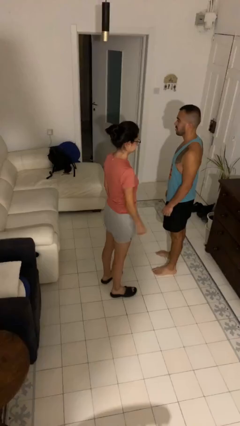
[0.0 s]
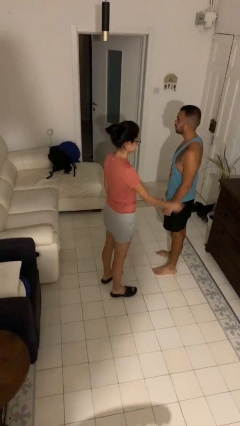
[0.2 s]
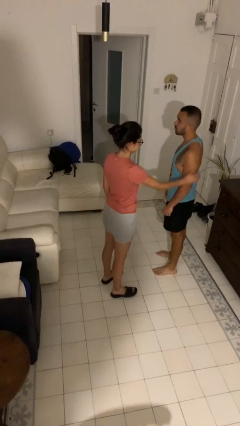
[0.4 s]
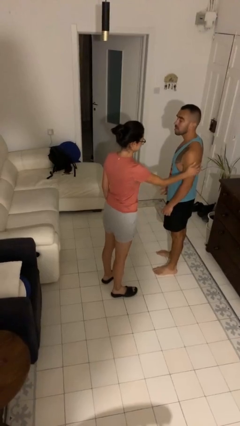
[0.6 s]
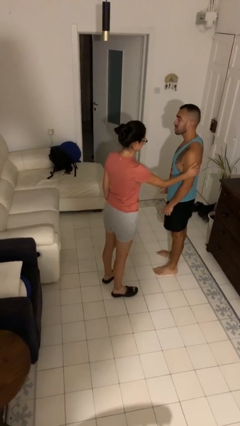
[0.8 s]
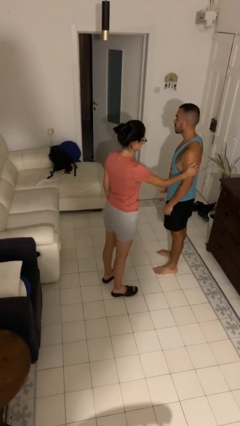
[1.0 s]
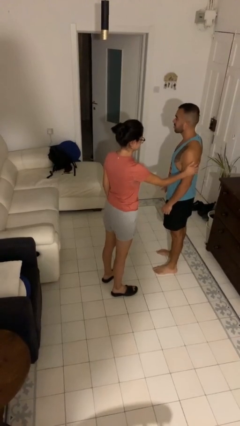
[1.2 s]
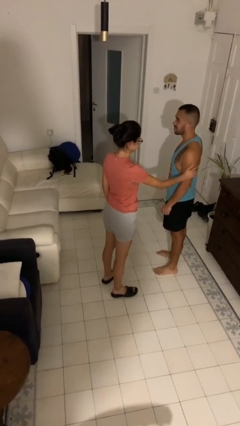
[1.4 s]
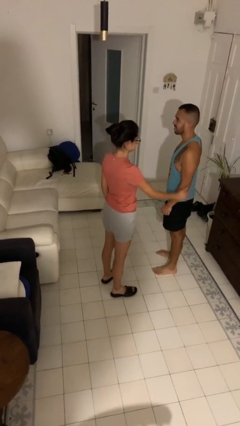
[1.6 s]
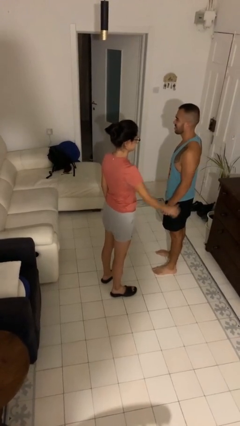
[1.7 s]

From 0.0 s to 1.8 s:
person grabs person by bicep

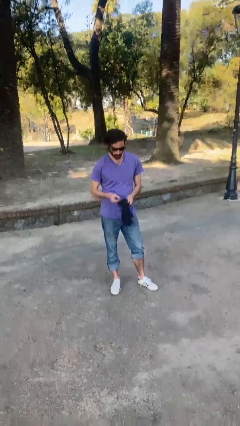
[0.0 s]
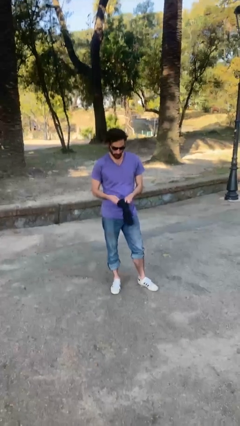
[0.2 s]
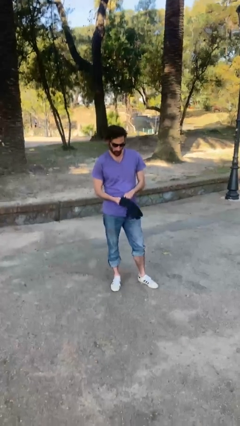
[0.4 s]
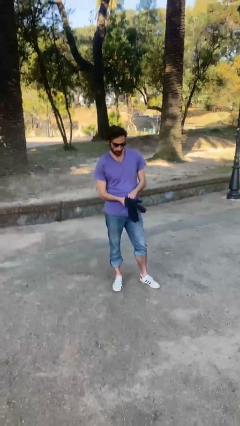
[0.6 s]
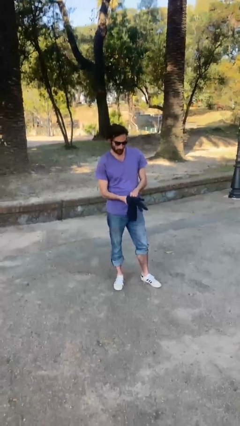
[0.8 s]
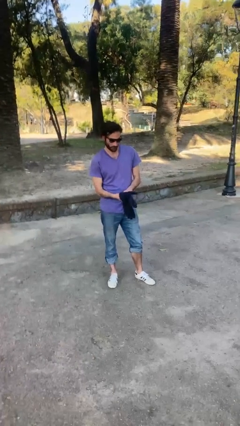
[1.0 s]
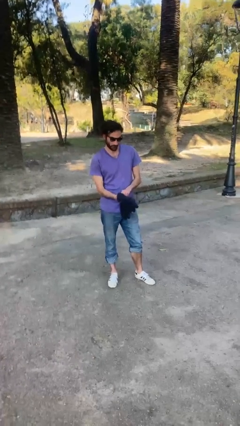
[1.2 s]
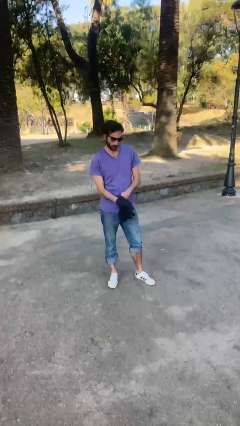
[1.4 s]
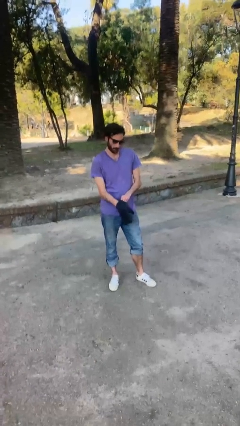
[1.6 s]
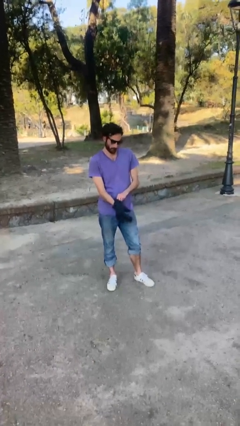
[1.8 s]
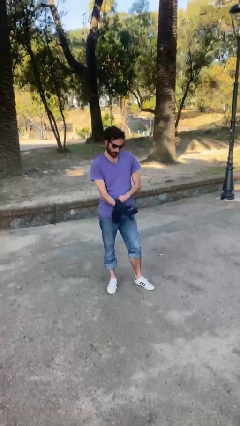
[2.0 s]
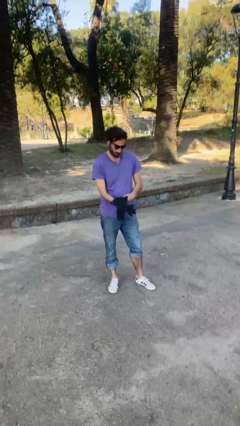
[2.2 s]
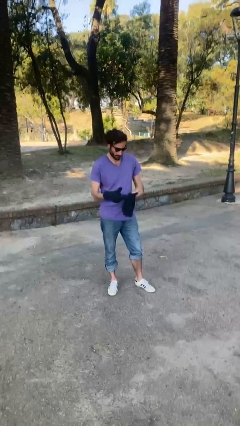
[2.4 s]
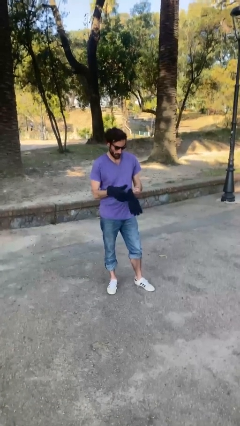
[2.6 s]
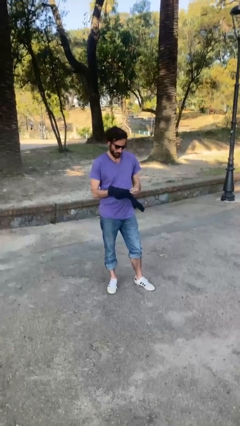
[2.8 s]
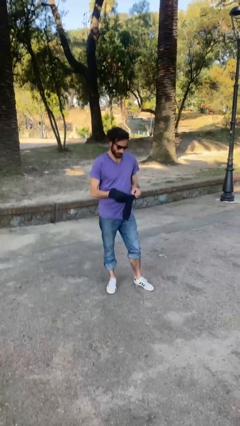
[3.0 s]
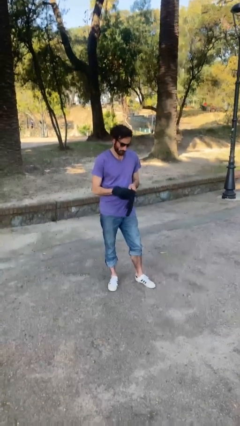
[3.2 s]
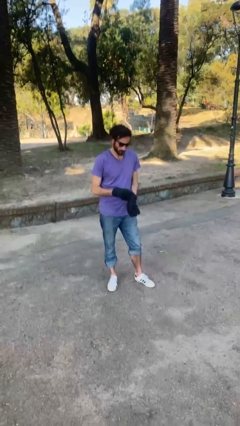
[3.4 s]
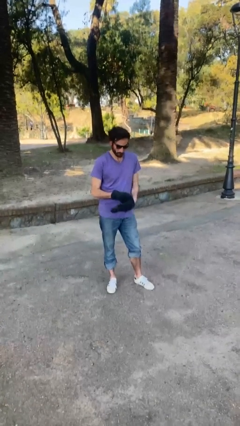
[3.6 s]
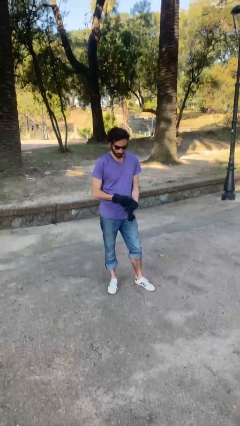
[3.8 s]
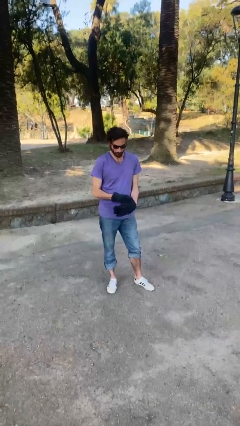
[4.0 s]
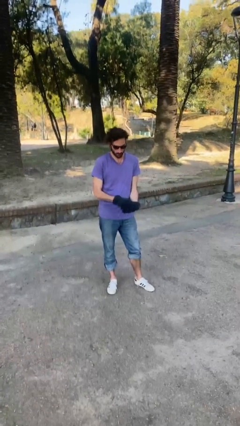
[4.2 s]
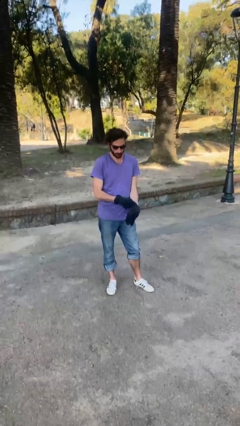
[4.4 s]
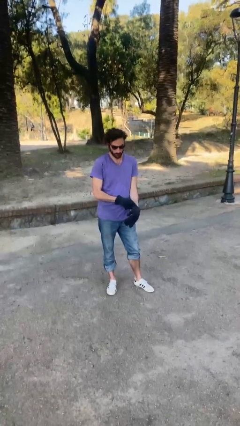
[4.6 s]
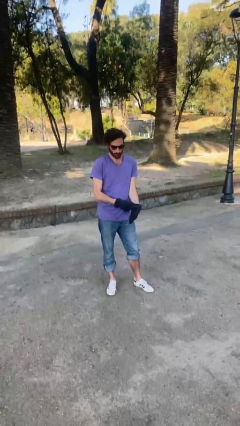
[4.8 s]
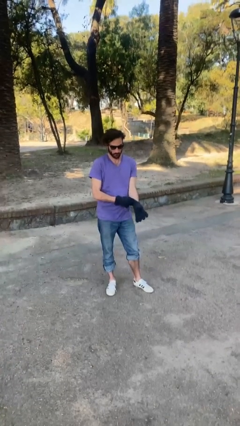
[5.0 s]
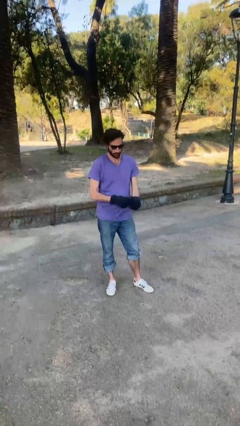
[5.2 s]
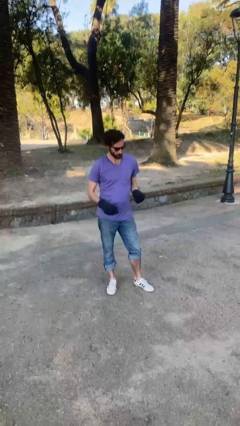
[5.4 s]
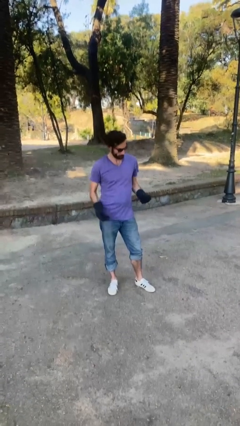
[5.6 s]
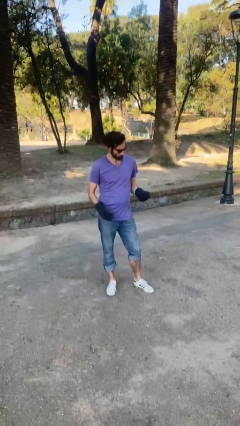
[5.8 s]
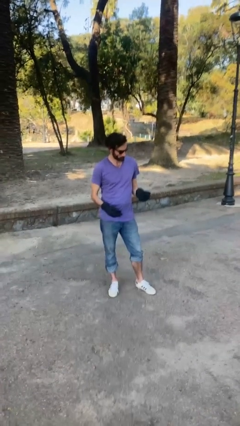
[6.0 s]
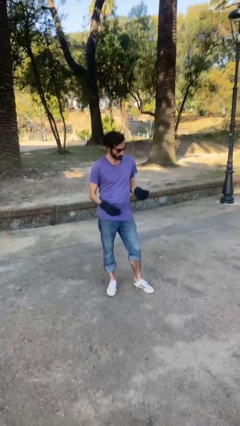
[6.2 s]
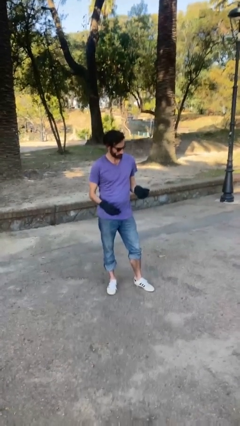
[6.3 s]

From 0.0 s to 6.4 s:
person puts on gloves

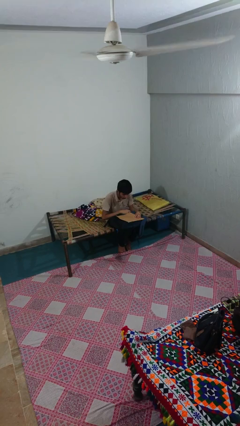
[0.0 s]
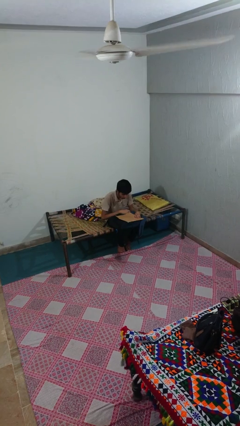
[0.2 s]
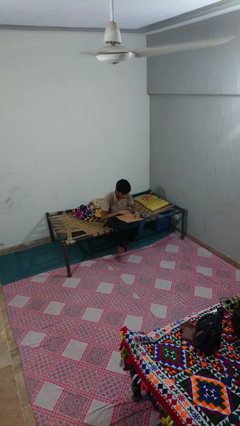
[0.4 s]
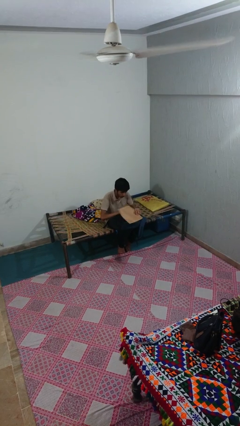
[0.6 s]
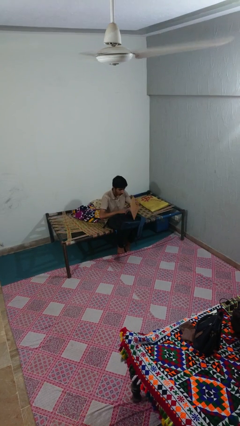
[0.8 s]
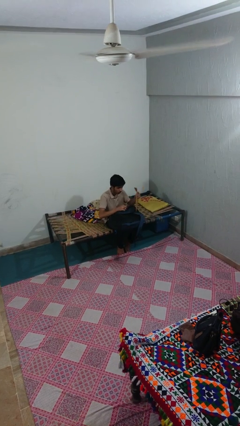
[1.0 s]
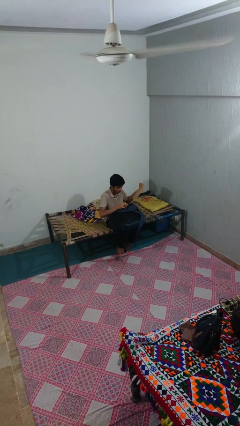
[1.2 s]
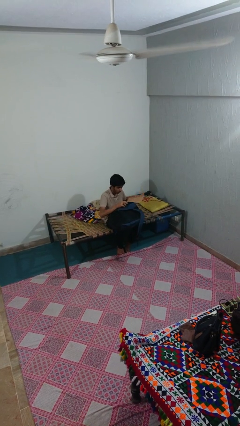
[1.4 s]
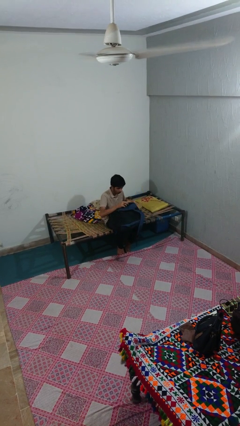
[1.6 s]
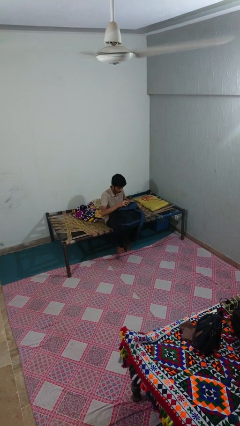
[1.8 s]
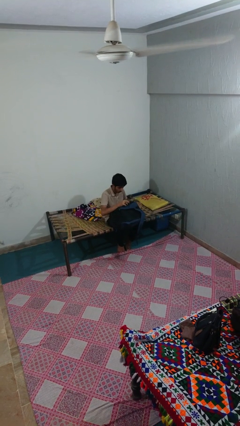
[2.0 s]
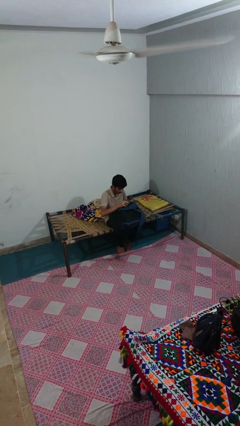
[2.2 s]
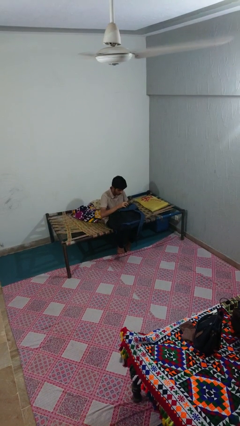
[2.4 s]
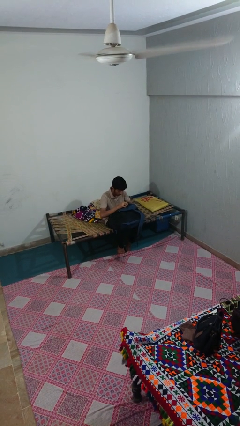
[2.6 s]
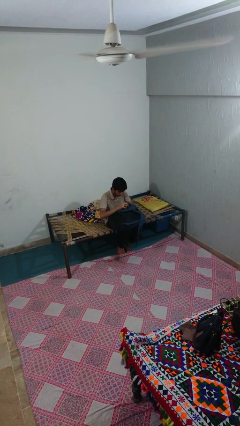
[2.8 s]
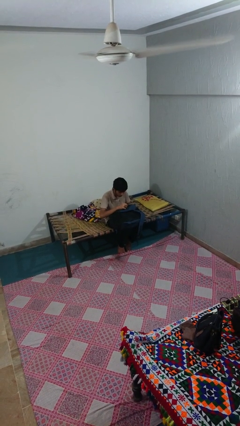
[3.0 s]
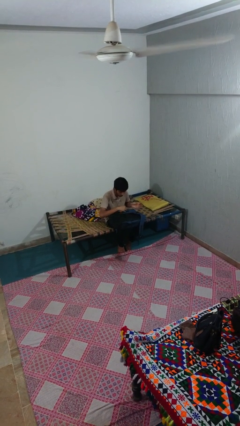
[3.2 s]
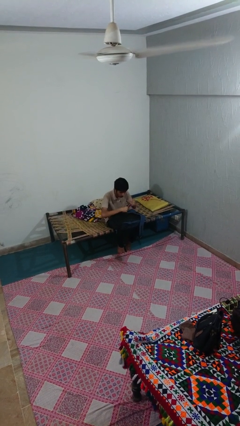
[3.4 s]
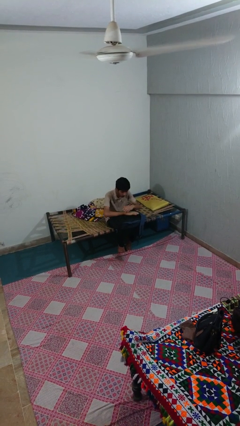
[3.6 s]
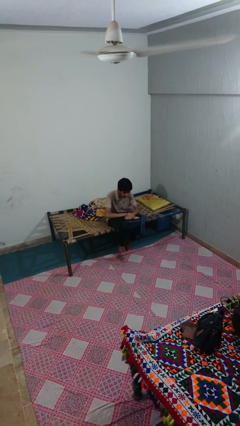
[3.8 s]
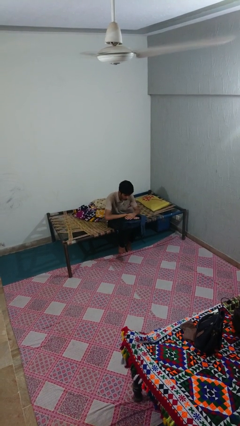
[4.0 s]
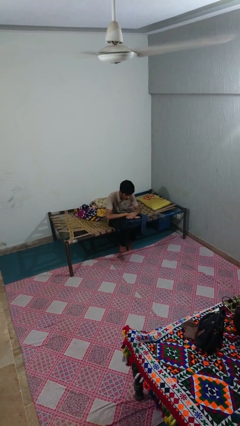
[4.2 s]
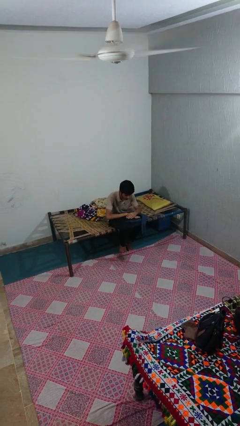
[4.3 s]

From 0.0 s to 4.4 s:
person puts object into backpack

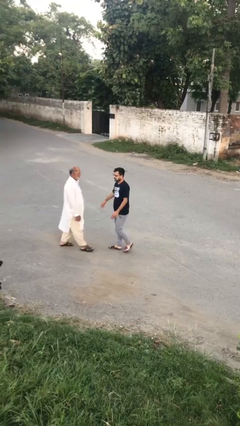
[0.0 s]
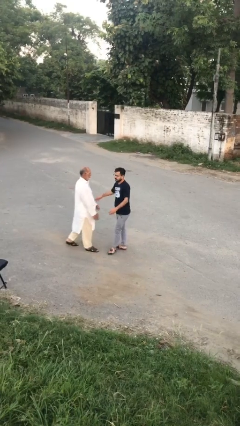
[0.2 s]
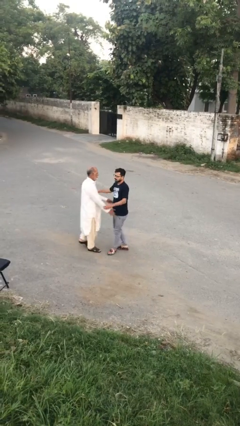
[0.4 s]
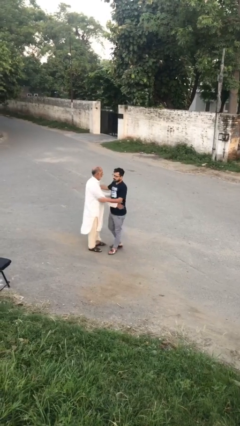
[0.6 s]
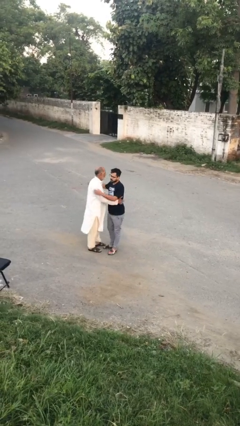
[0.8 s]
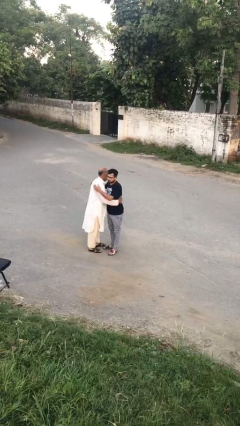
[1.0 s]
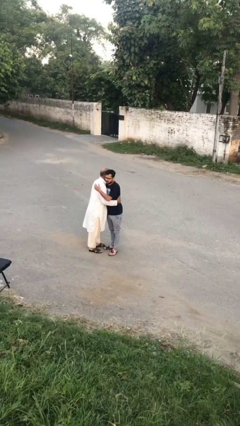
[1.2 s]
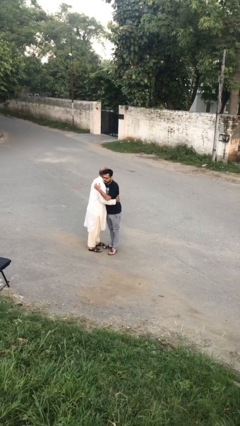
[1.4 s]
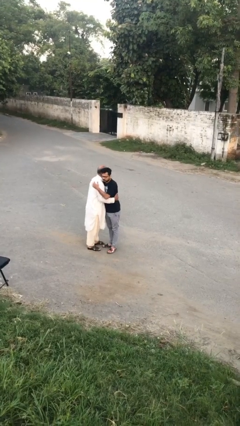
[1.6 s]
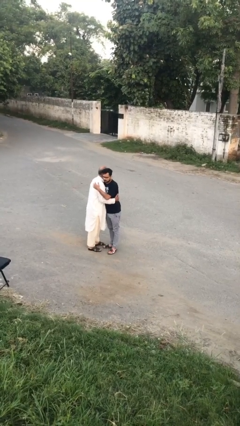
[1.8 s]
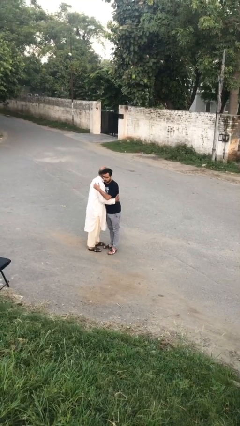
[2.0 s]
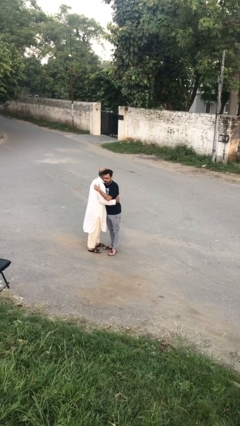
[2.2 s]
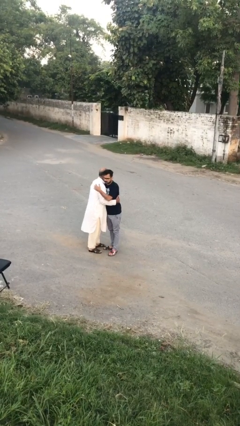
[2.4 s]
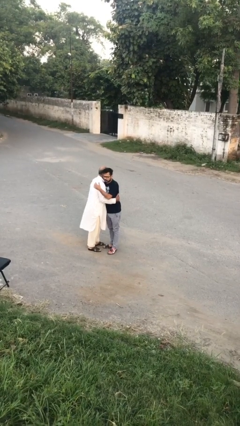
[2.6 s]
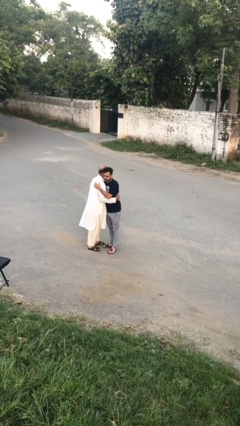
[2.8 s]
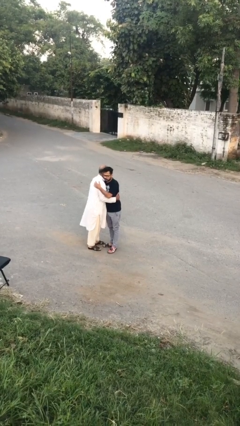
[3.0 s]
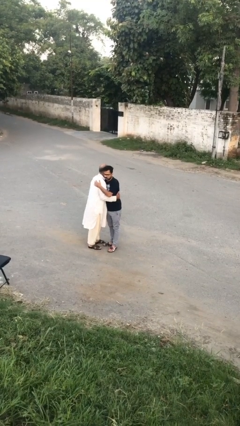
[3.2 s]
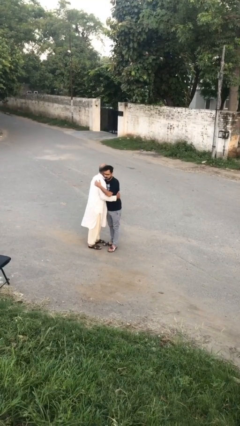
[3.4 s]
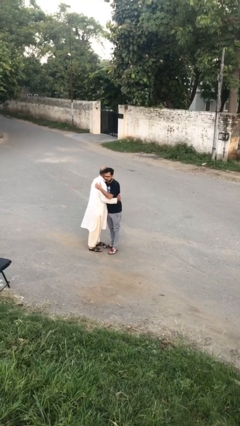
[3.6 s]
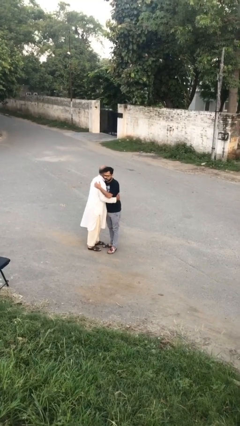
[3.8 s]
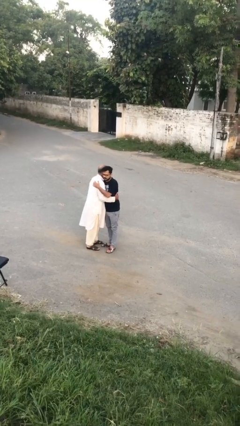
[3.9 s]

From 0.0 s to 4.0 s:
person embraces person

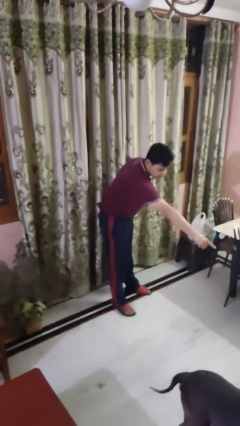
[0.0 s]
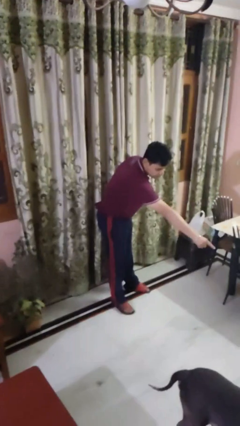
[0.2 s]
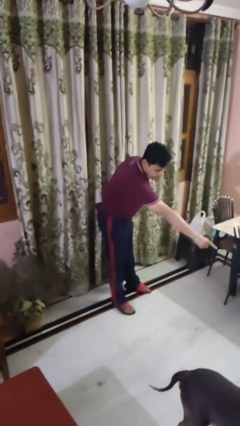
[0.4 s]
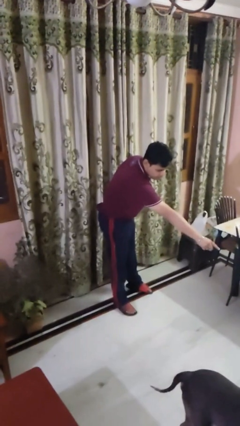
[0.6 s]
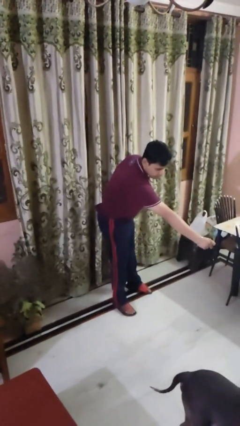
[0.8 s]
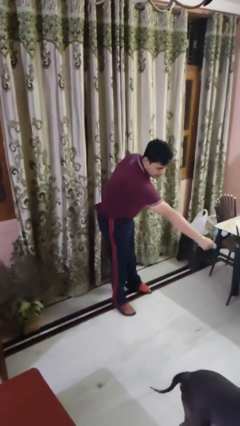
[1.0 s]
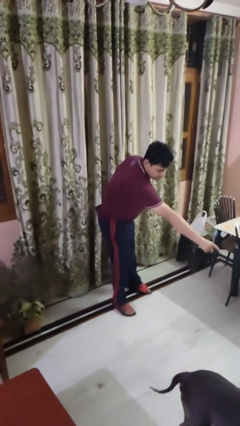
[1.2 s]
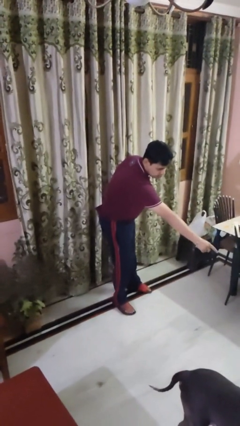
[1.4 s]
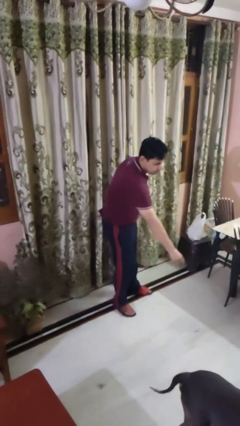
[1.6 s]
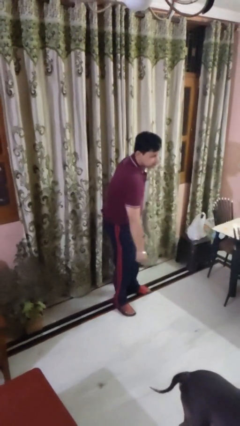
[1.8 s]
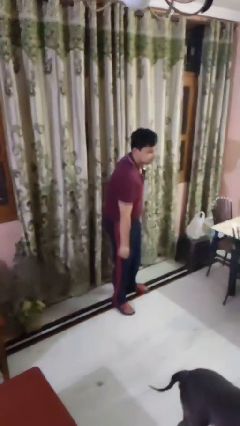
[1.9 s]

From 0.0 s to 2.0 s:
person points to dog
